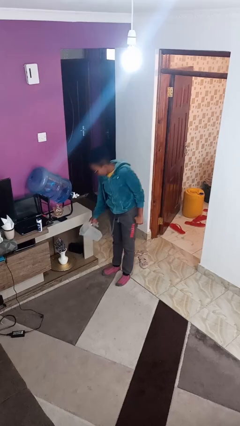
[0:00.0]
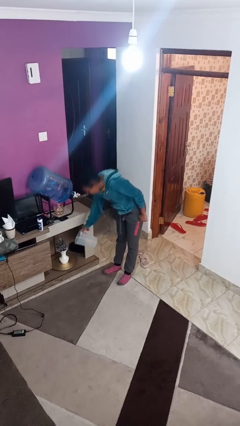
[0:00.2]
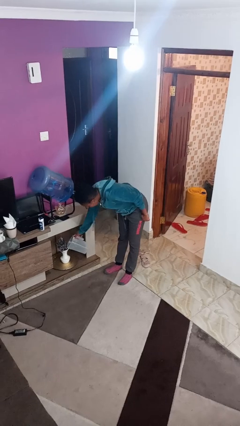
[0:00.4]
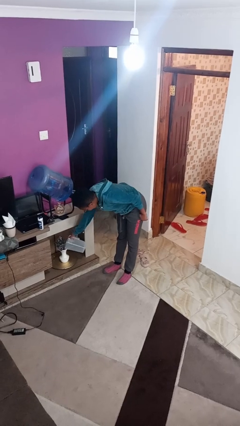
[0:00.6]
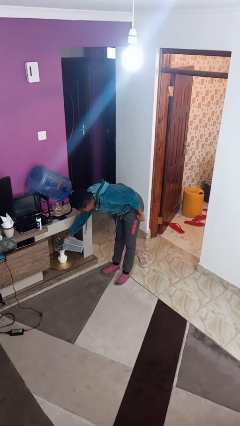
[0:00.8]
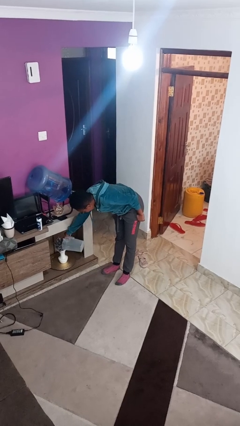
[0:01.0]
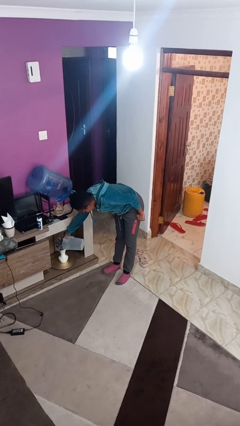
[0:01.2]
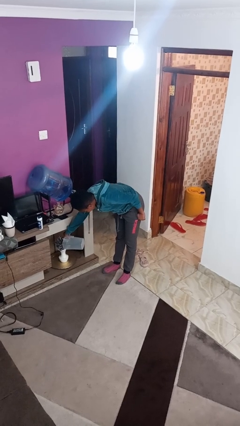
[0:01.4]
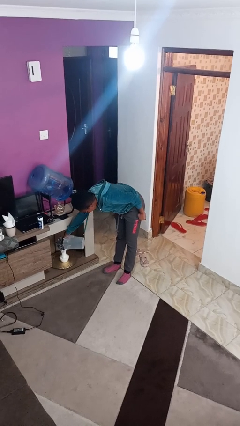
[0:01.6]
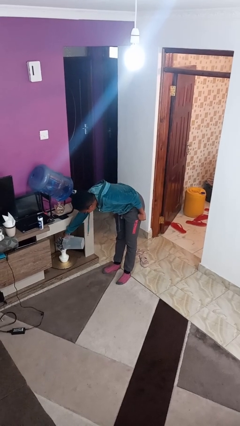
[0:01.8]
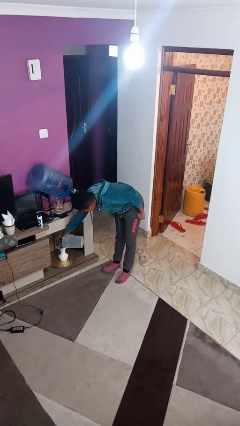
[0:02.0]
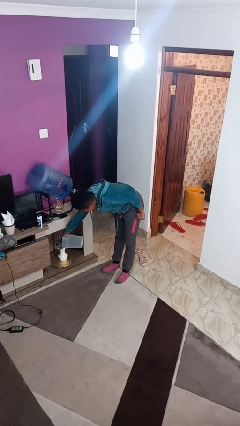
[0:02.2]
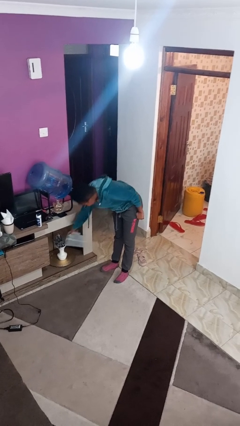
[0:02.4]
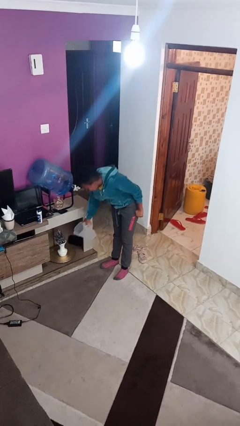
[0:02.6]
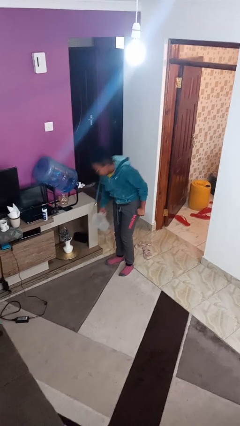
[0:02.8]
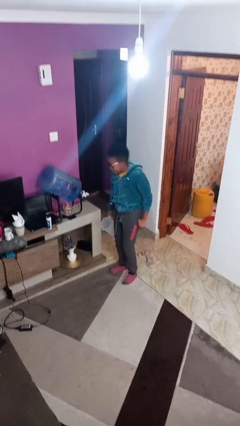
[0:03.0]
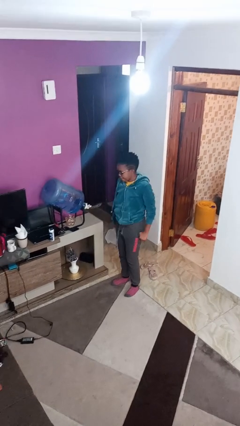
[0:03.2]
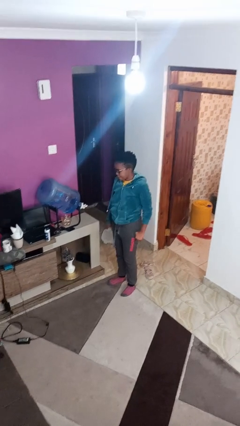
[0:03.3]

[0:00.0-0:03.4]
person waters houseplant

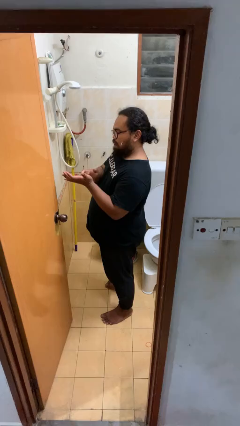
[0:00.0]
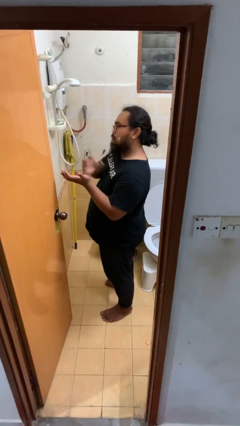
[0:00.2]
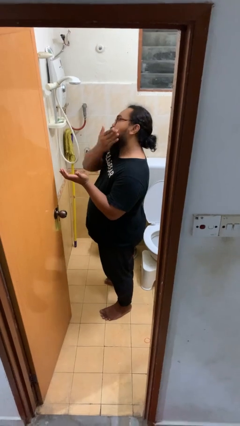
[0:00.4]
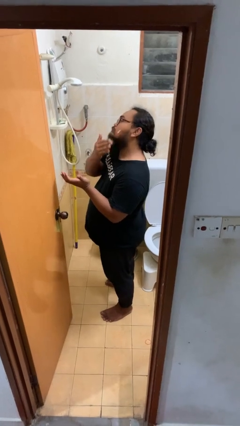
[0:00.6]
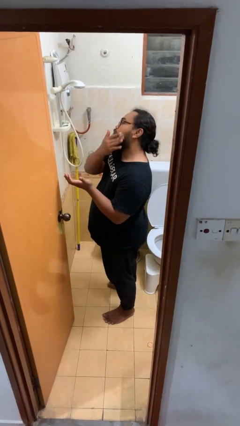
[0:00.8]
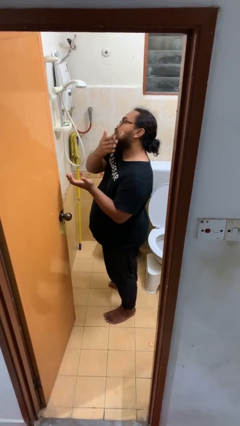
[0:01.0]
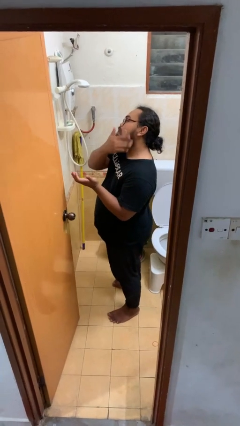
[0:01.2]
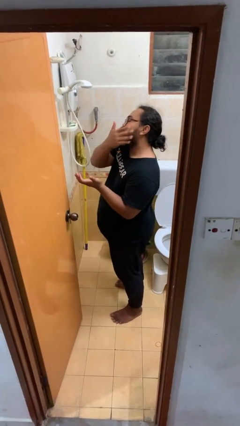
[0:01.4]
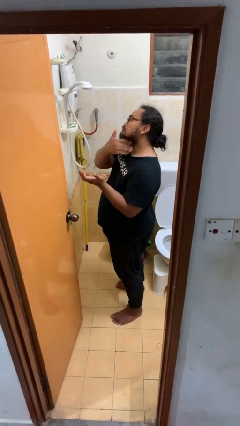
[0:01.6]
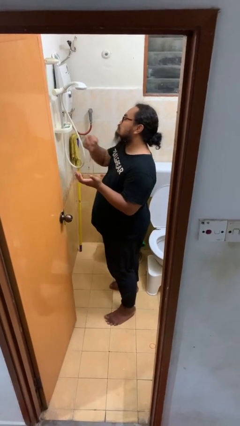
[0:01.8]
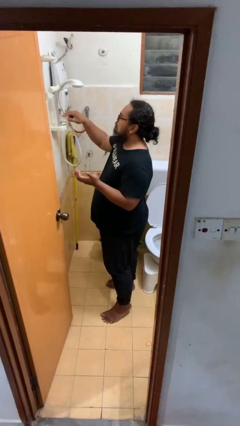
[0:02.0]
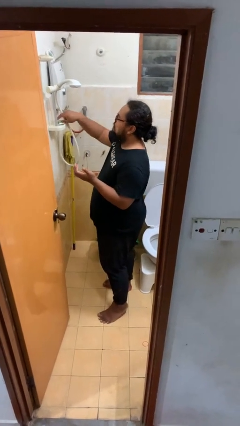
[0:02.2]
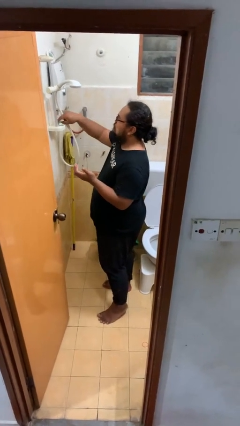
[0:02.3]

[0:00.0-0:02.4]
person applies shaving cream

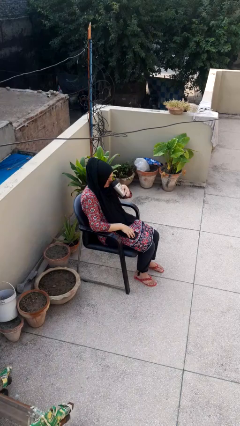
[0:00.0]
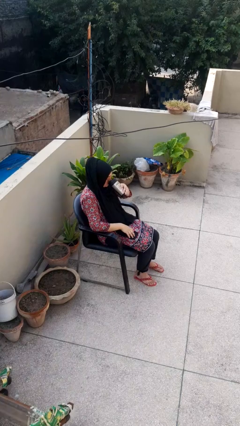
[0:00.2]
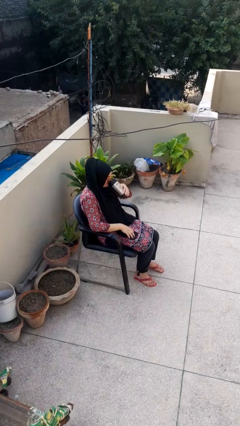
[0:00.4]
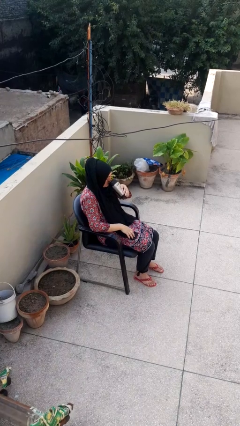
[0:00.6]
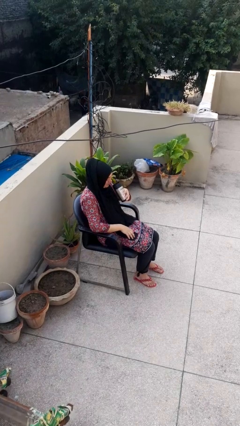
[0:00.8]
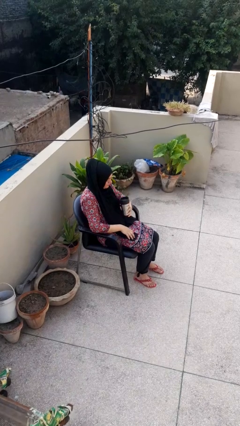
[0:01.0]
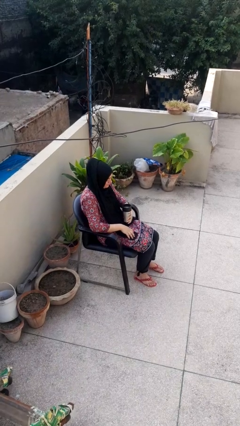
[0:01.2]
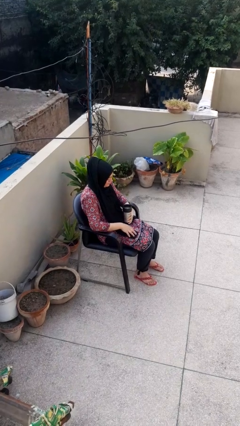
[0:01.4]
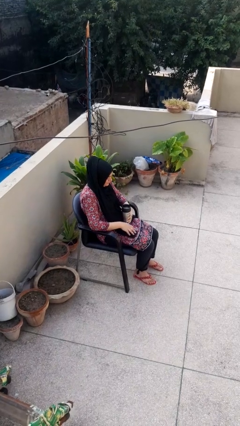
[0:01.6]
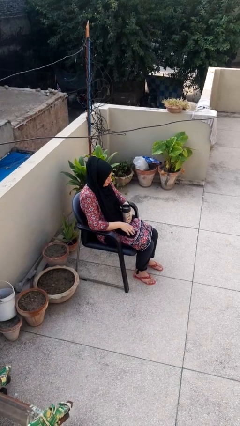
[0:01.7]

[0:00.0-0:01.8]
person drinks from beverage can

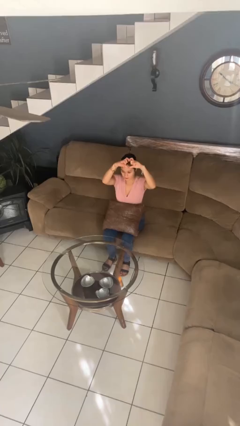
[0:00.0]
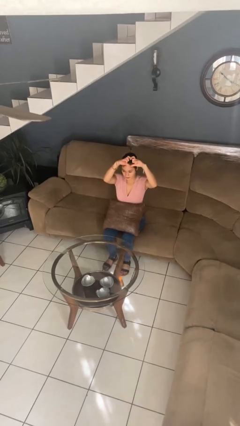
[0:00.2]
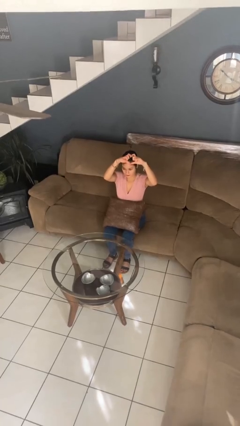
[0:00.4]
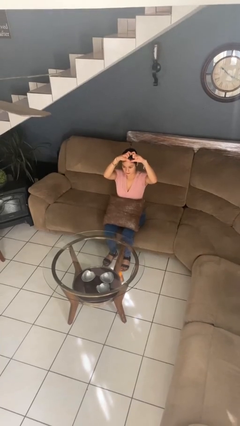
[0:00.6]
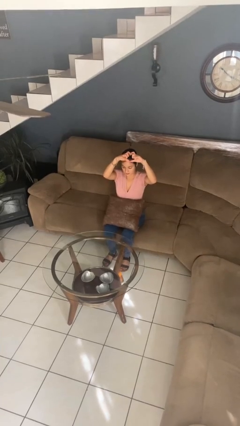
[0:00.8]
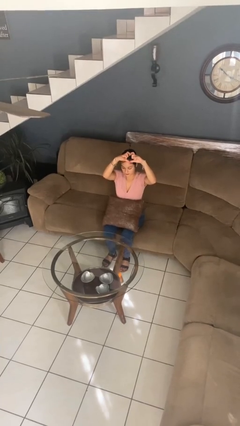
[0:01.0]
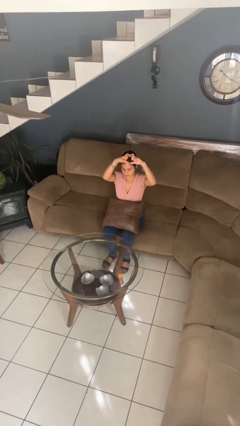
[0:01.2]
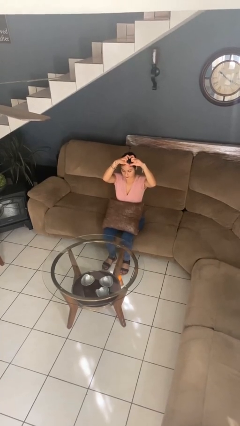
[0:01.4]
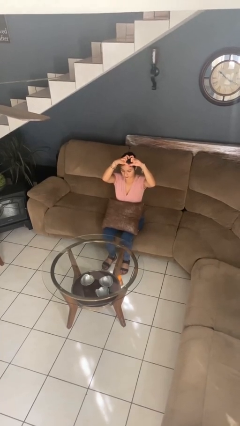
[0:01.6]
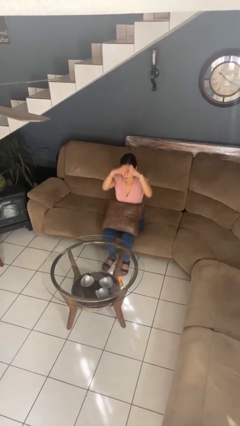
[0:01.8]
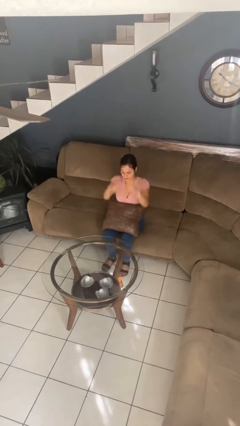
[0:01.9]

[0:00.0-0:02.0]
person gestures heart

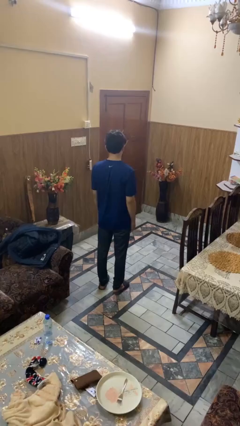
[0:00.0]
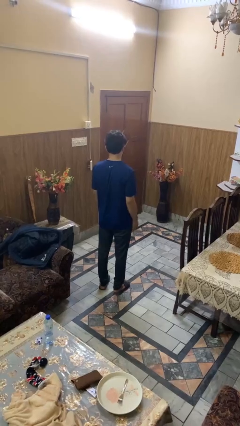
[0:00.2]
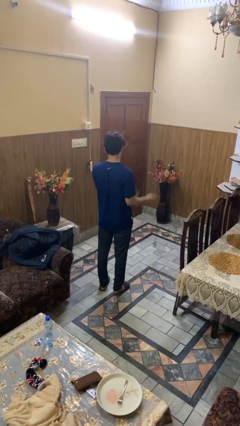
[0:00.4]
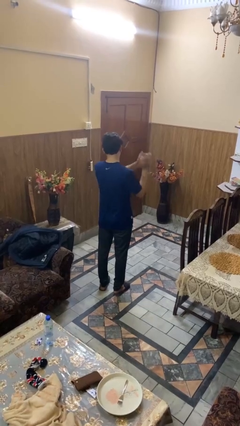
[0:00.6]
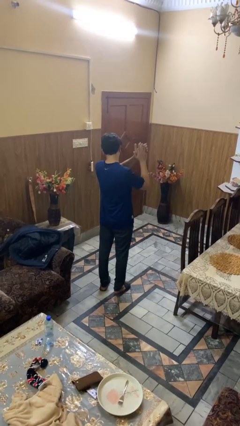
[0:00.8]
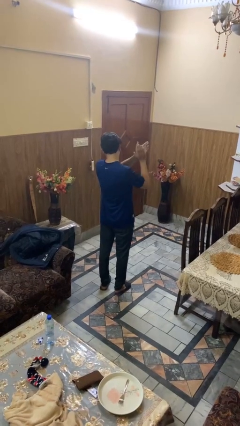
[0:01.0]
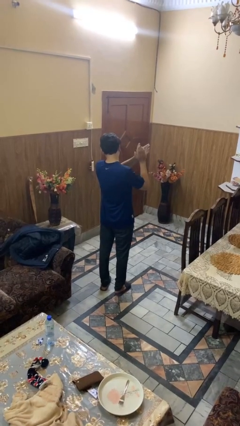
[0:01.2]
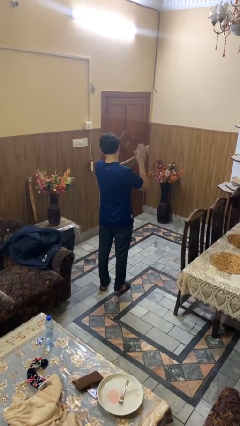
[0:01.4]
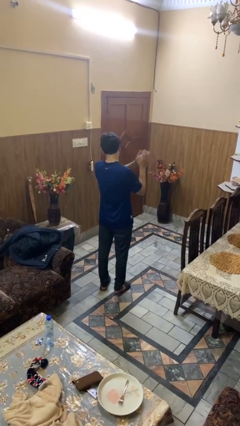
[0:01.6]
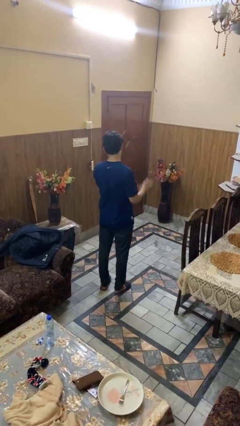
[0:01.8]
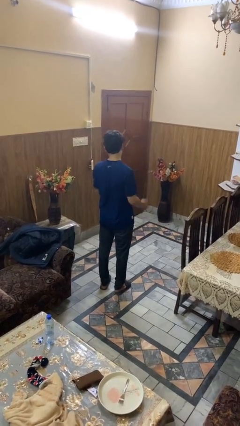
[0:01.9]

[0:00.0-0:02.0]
person claps hands

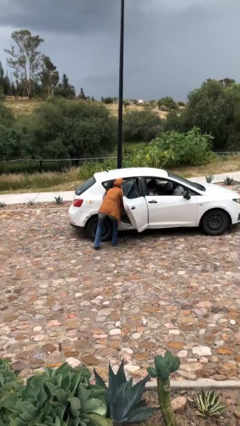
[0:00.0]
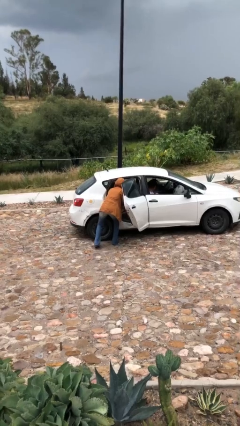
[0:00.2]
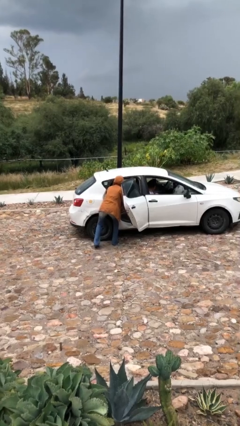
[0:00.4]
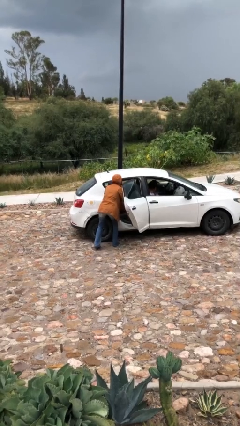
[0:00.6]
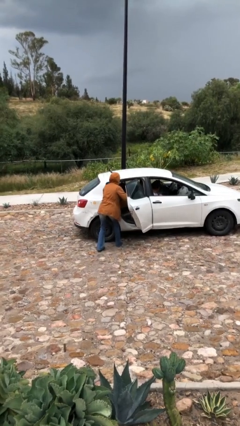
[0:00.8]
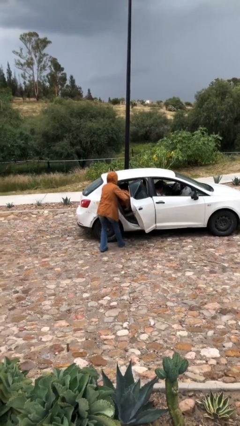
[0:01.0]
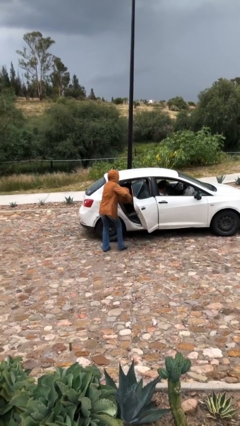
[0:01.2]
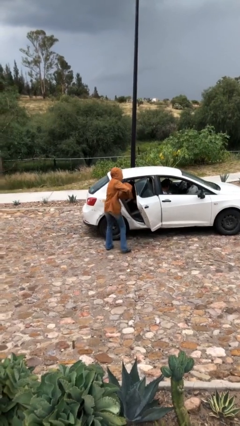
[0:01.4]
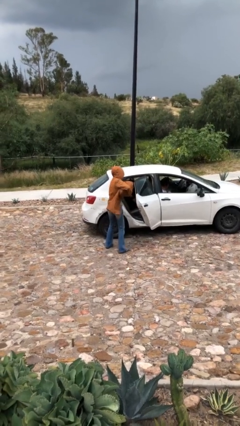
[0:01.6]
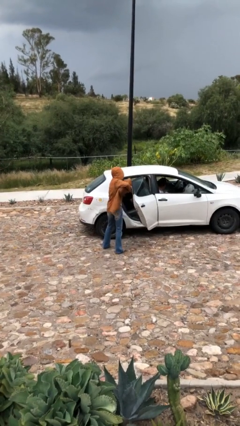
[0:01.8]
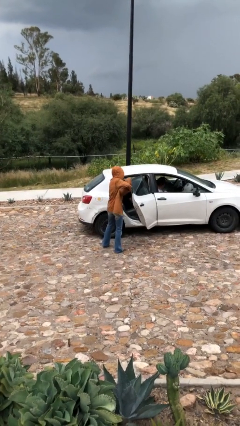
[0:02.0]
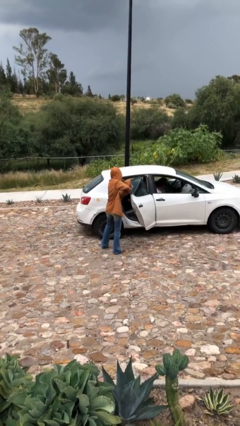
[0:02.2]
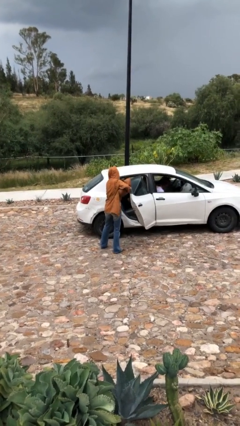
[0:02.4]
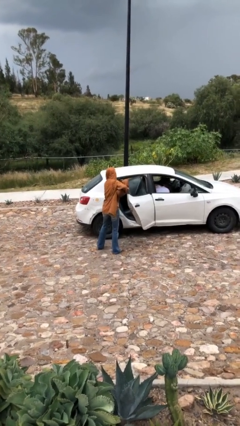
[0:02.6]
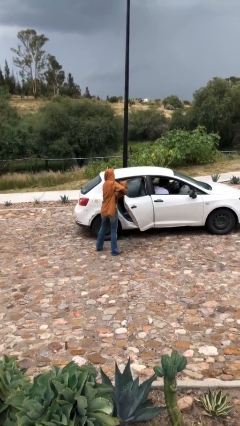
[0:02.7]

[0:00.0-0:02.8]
person unloads car

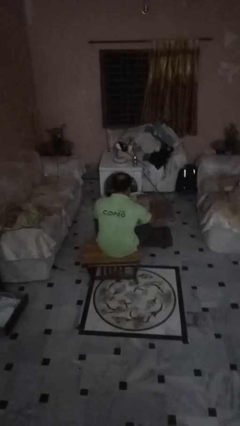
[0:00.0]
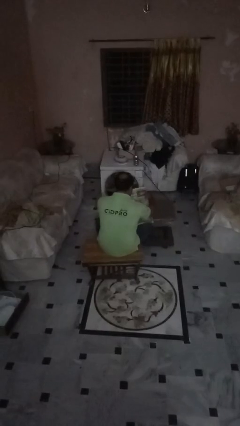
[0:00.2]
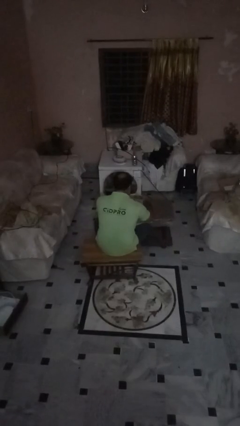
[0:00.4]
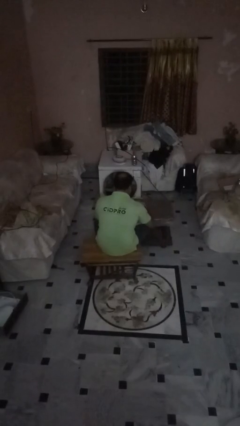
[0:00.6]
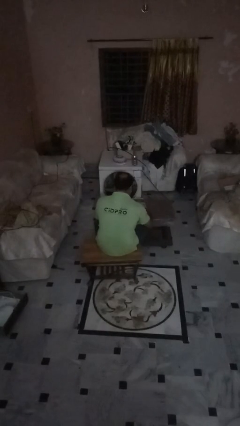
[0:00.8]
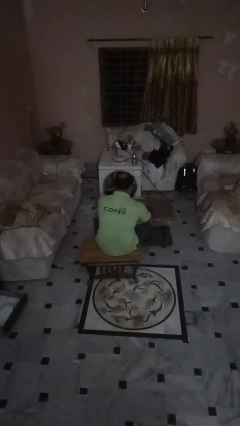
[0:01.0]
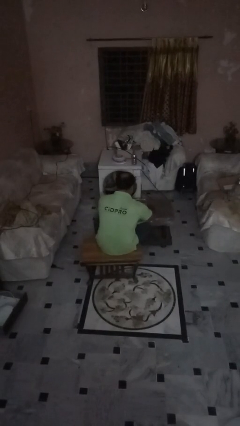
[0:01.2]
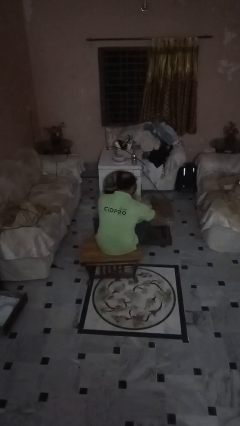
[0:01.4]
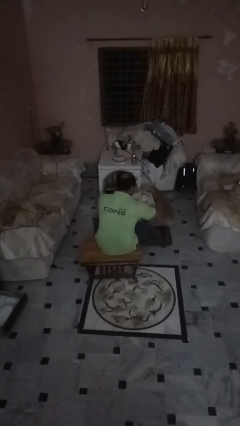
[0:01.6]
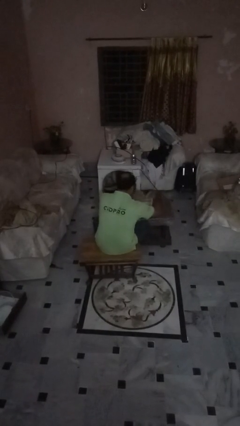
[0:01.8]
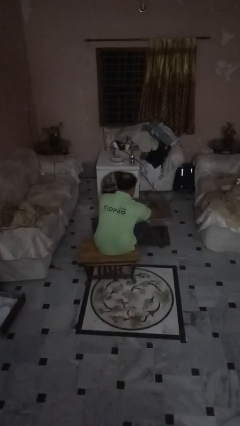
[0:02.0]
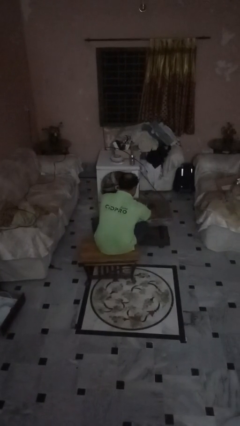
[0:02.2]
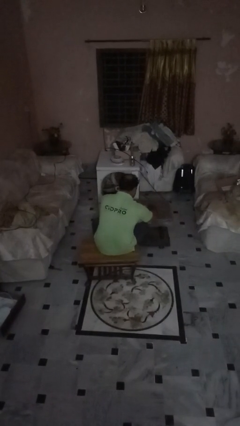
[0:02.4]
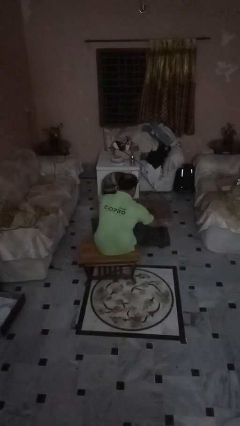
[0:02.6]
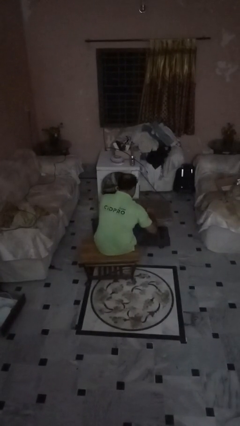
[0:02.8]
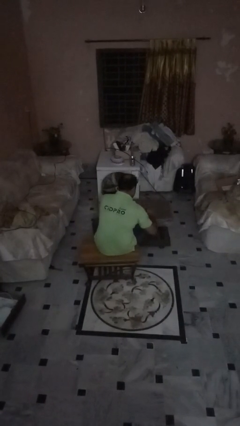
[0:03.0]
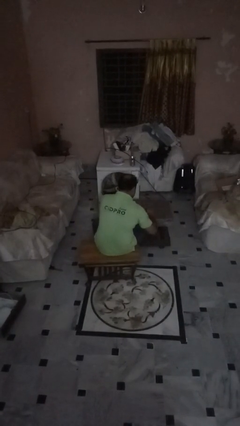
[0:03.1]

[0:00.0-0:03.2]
person tears paper
